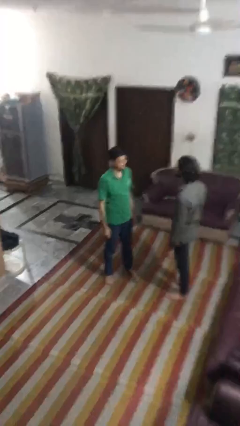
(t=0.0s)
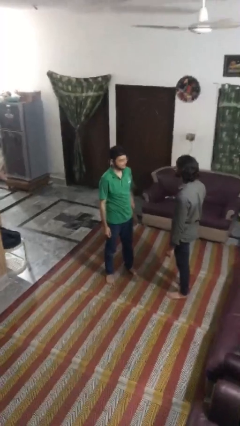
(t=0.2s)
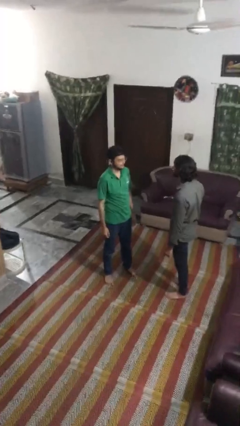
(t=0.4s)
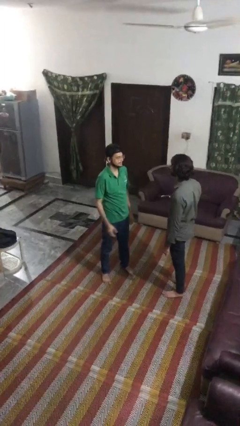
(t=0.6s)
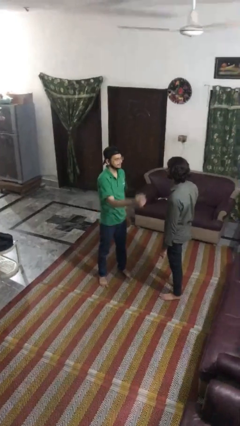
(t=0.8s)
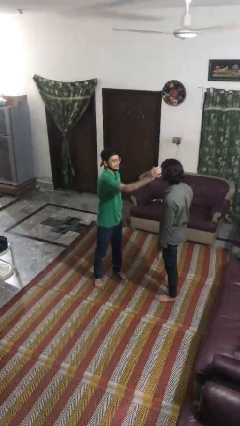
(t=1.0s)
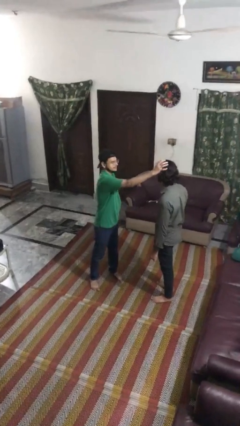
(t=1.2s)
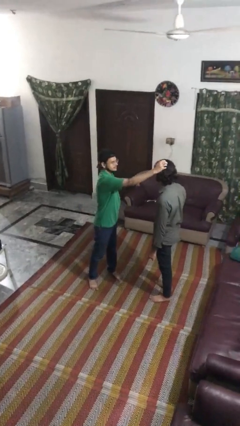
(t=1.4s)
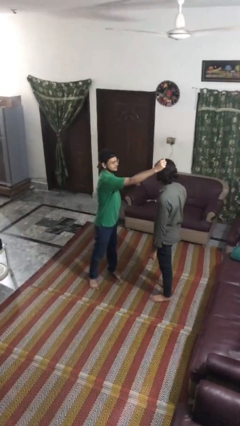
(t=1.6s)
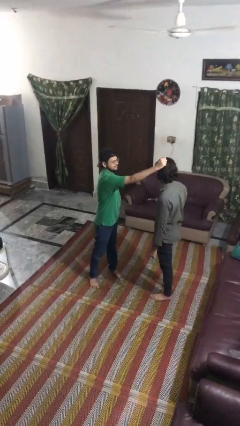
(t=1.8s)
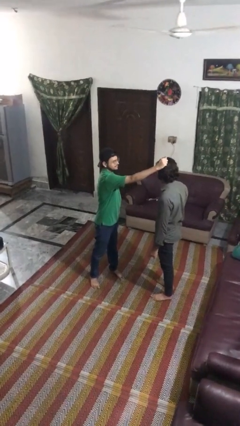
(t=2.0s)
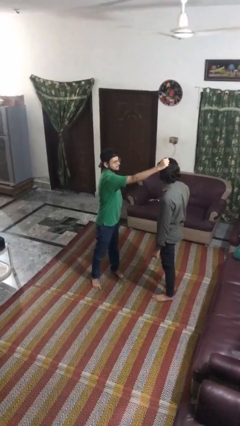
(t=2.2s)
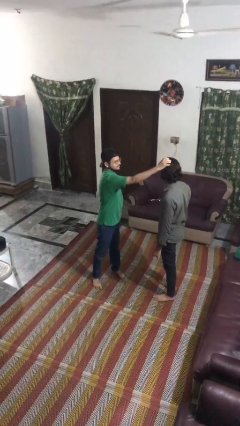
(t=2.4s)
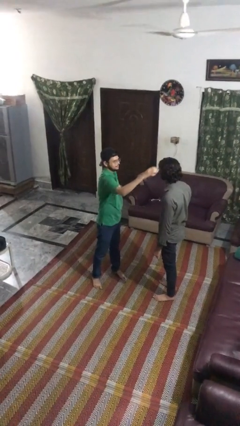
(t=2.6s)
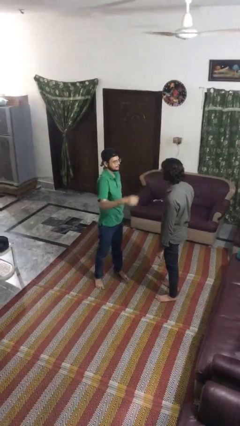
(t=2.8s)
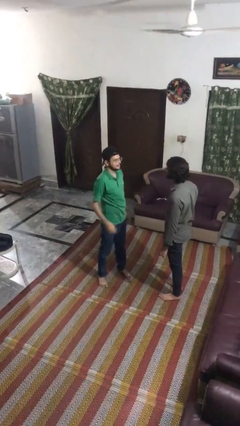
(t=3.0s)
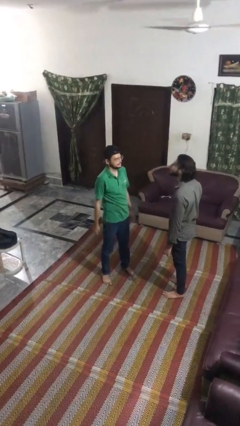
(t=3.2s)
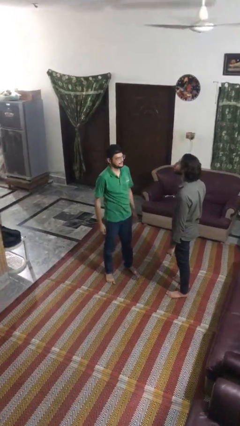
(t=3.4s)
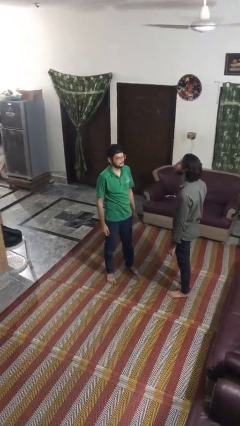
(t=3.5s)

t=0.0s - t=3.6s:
person grabs person by hair

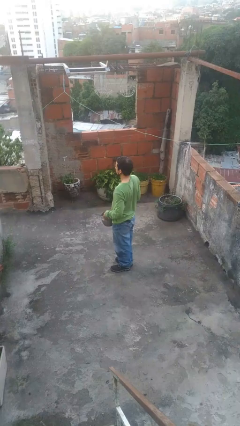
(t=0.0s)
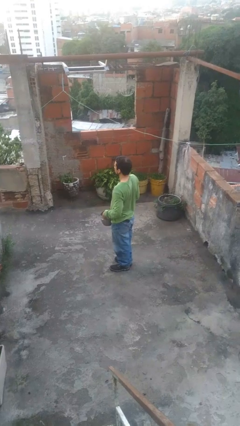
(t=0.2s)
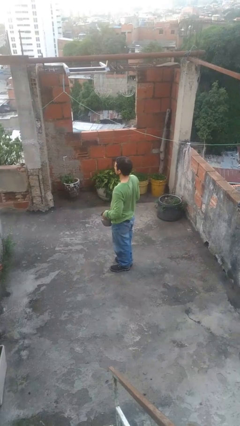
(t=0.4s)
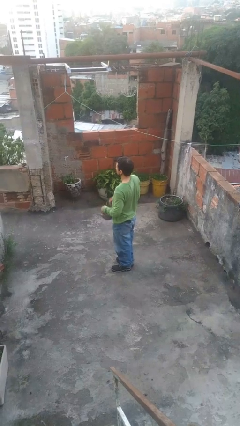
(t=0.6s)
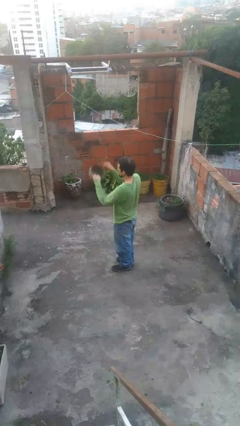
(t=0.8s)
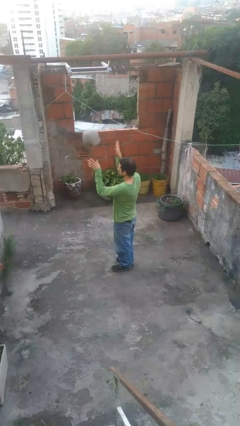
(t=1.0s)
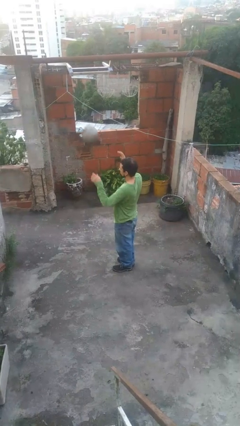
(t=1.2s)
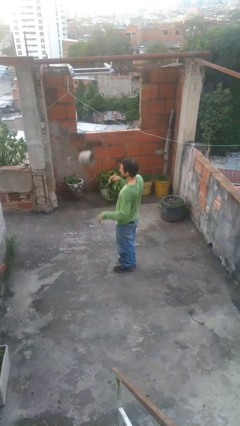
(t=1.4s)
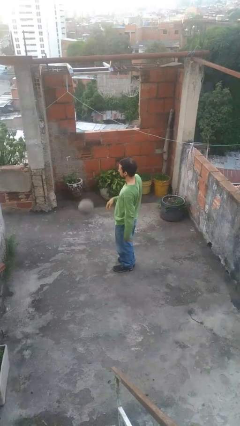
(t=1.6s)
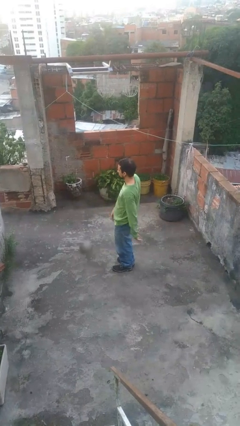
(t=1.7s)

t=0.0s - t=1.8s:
person throws object into air

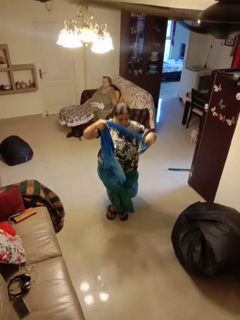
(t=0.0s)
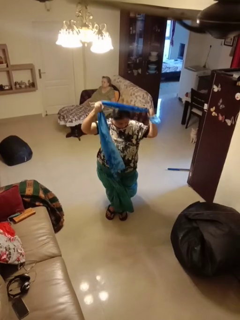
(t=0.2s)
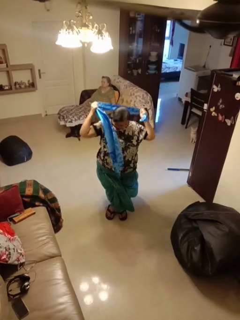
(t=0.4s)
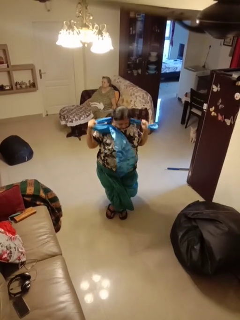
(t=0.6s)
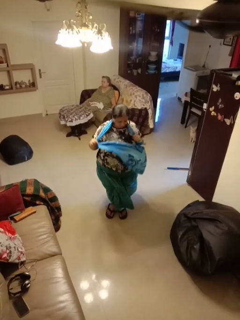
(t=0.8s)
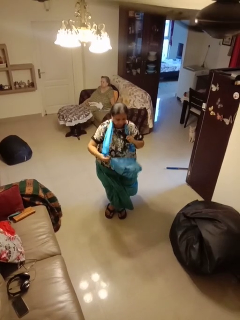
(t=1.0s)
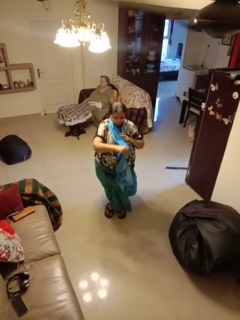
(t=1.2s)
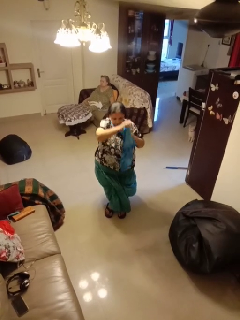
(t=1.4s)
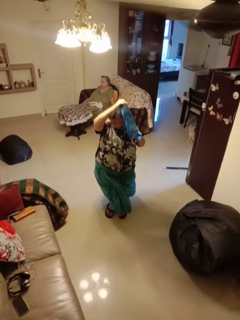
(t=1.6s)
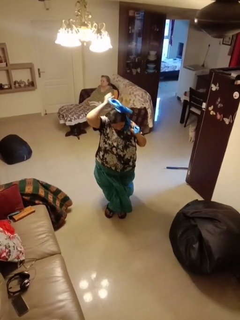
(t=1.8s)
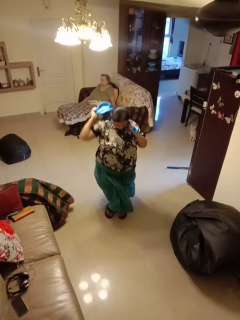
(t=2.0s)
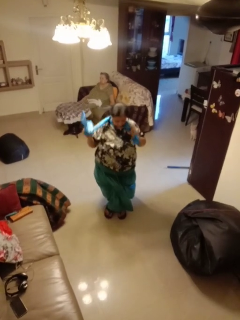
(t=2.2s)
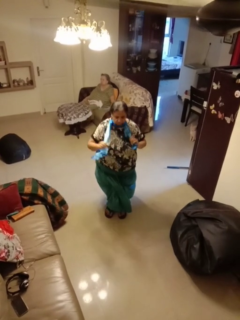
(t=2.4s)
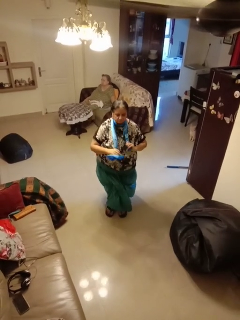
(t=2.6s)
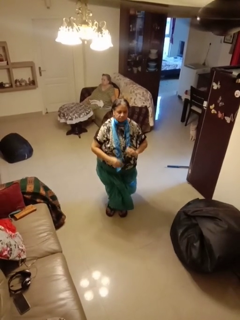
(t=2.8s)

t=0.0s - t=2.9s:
person puts on scarf

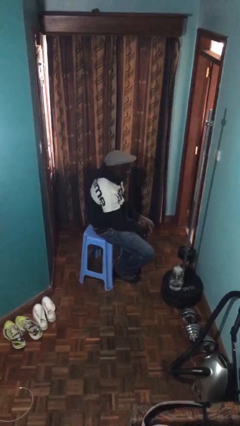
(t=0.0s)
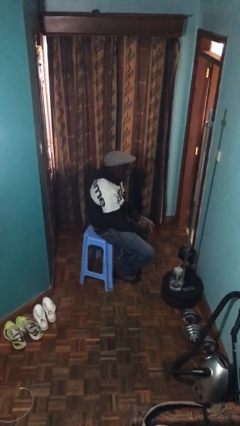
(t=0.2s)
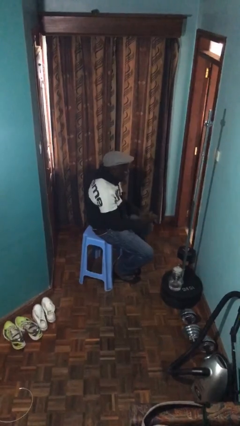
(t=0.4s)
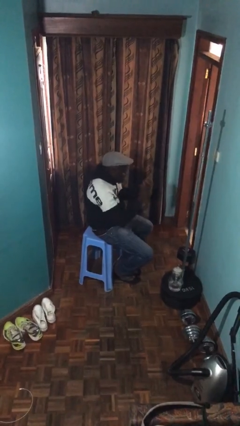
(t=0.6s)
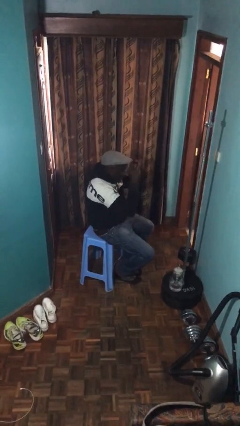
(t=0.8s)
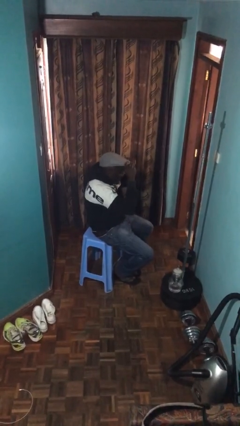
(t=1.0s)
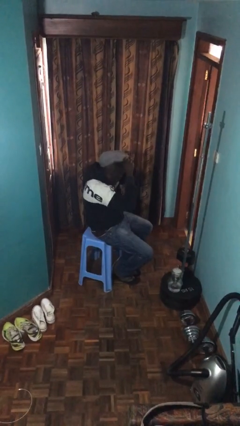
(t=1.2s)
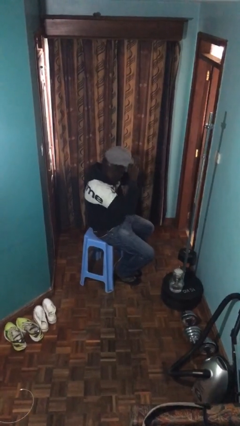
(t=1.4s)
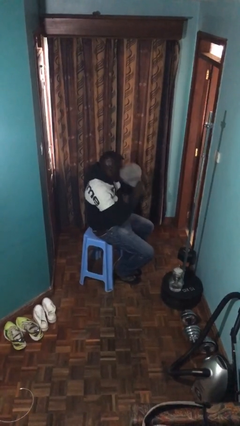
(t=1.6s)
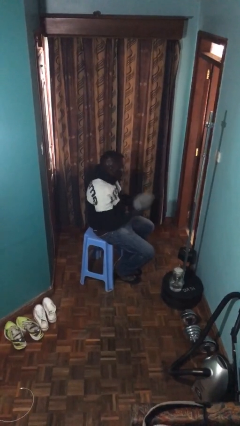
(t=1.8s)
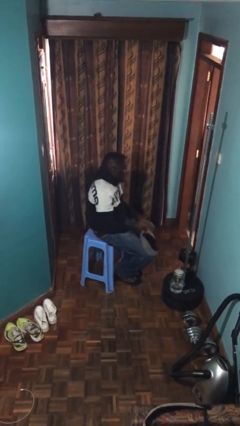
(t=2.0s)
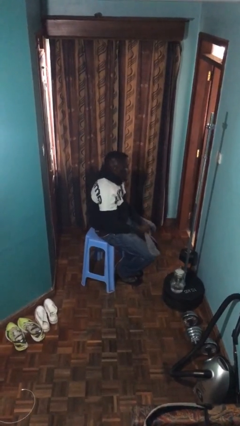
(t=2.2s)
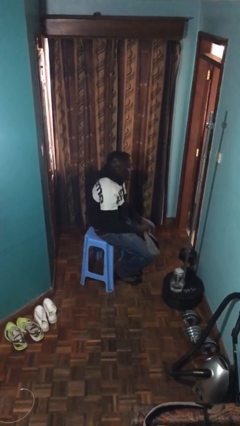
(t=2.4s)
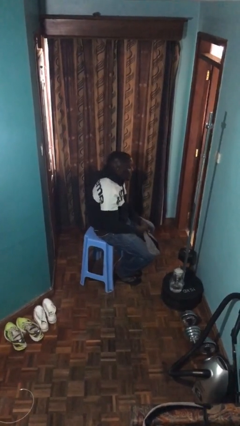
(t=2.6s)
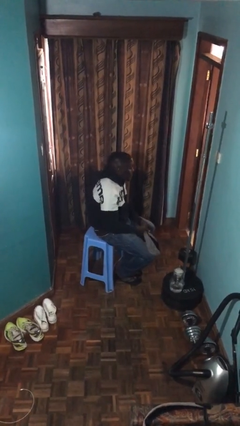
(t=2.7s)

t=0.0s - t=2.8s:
person takes off hat

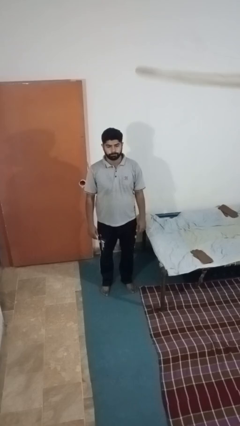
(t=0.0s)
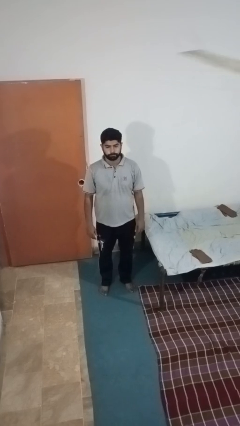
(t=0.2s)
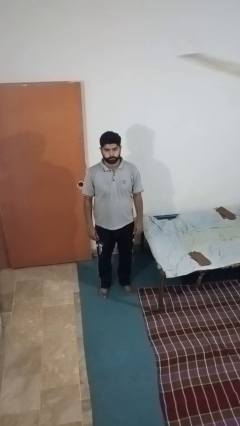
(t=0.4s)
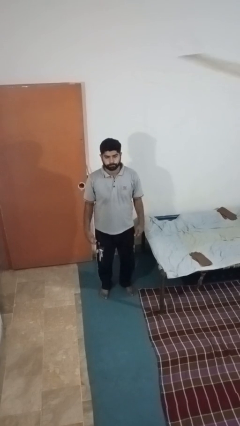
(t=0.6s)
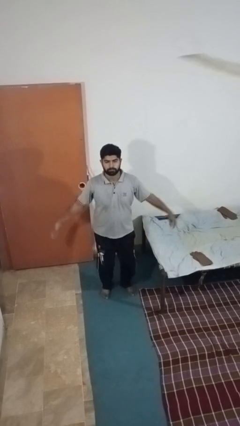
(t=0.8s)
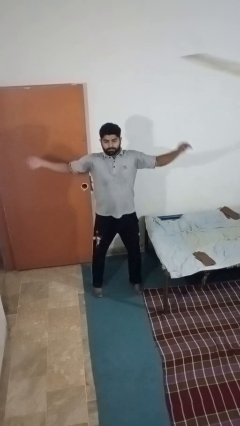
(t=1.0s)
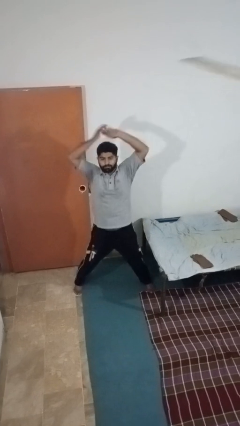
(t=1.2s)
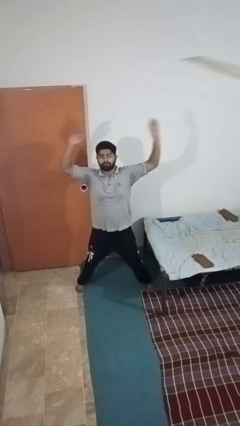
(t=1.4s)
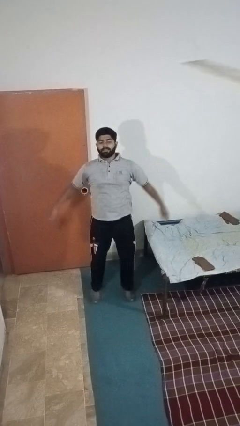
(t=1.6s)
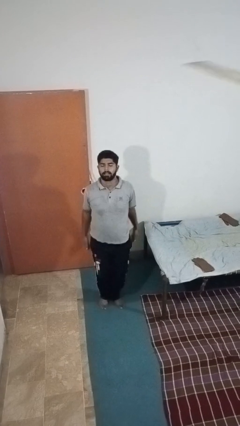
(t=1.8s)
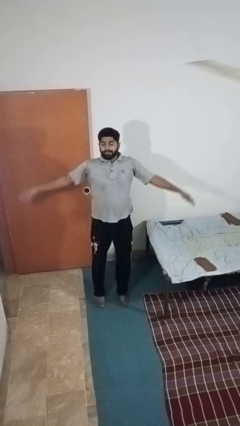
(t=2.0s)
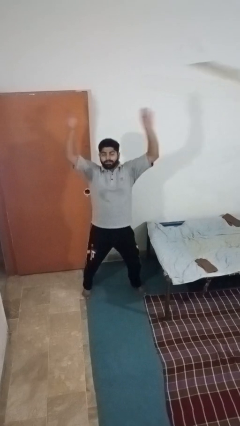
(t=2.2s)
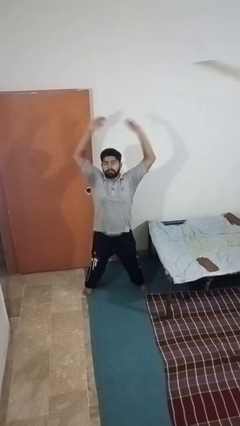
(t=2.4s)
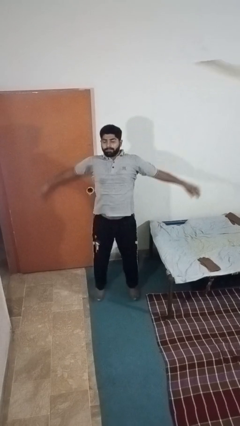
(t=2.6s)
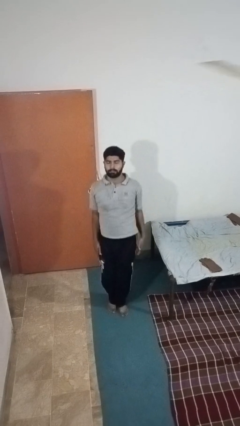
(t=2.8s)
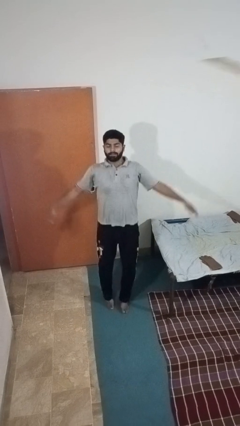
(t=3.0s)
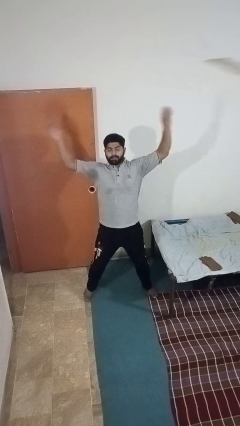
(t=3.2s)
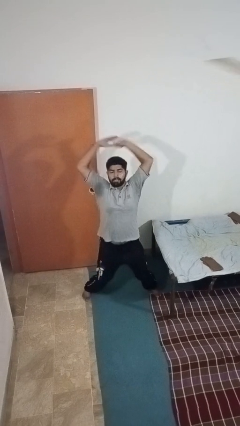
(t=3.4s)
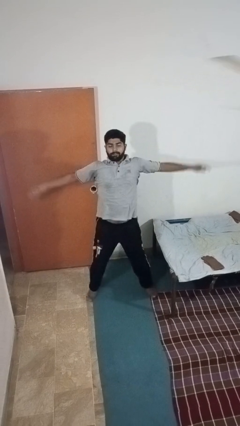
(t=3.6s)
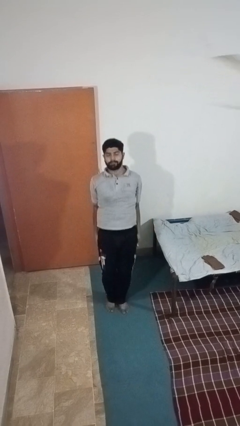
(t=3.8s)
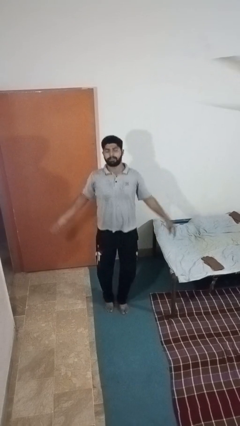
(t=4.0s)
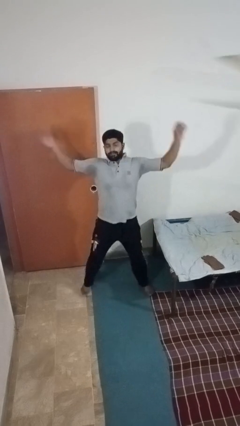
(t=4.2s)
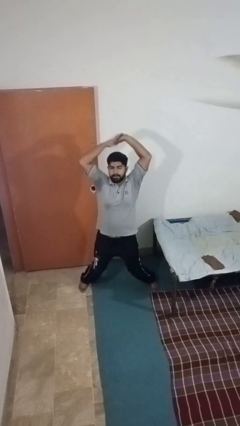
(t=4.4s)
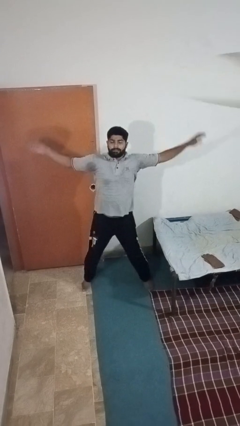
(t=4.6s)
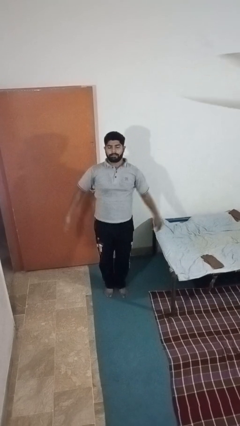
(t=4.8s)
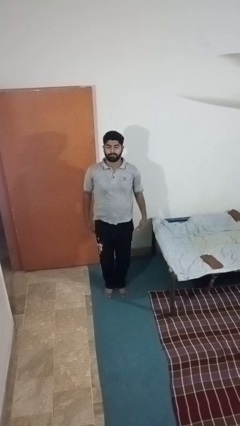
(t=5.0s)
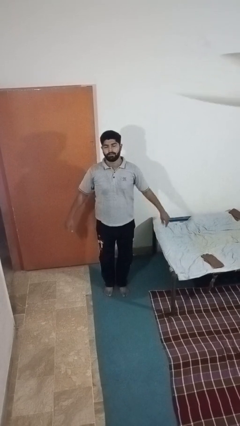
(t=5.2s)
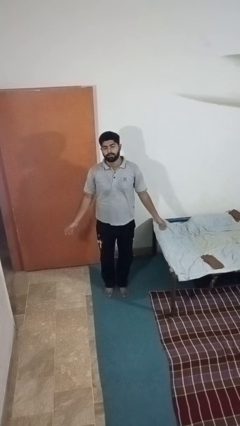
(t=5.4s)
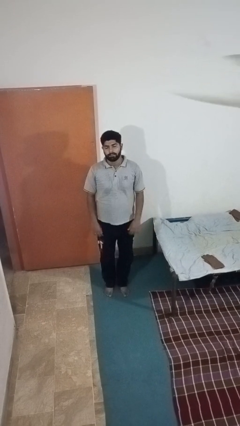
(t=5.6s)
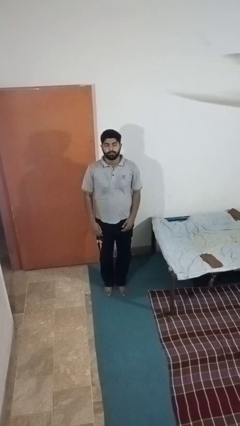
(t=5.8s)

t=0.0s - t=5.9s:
person exercises with jumping jacks

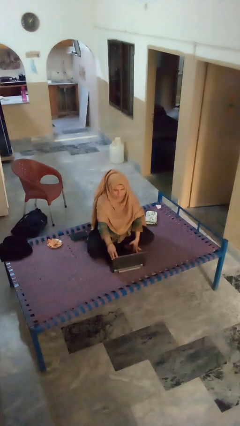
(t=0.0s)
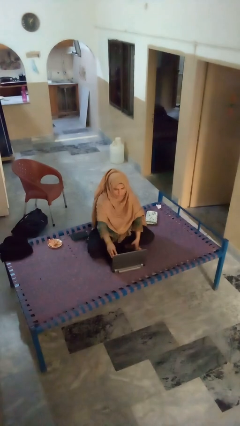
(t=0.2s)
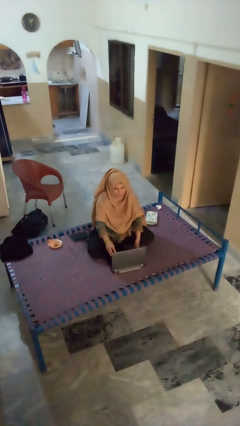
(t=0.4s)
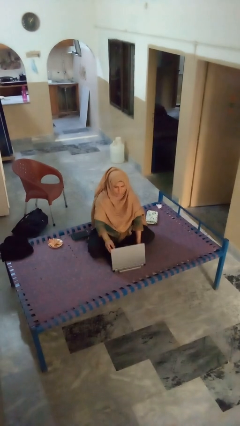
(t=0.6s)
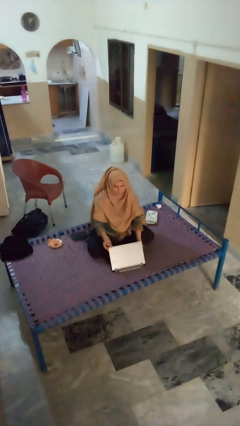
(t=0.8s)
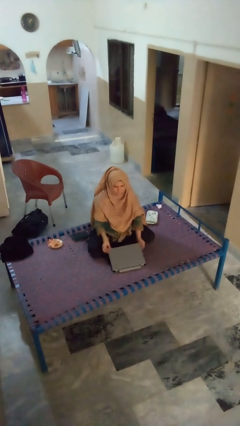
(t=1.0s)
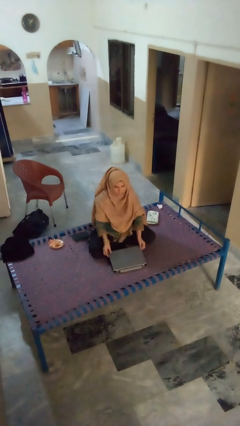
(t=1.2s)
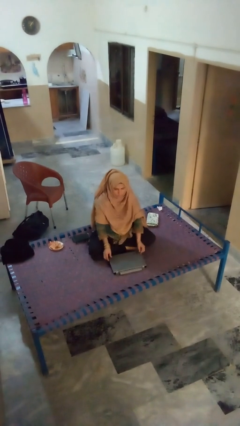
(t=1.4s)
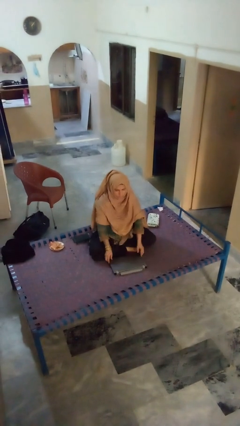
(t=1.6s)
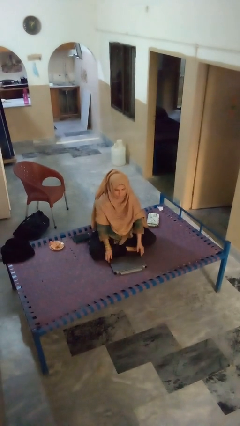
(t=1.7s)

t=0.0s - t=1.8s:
person closes laptop
